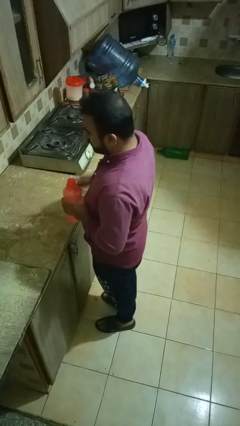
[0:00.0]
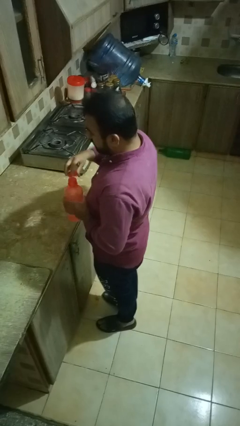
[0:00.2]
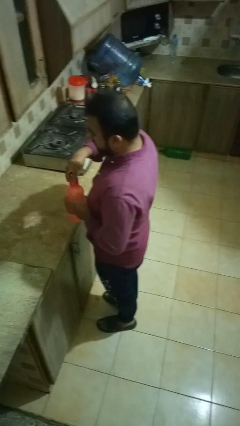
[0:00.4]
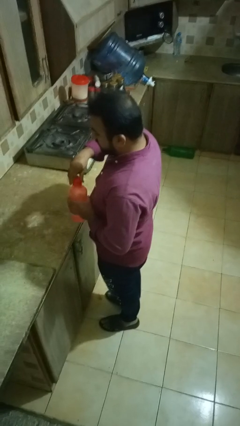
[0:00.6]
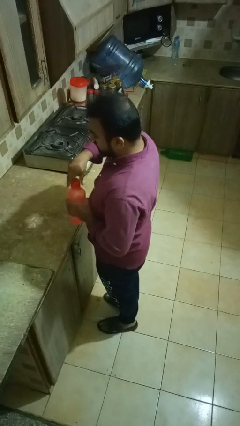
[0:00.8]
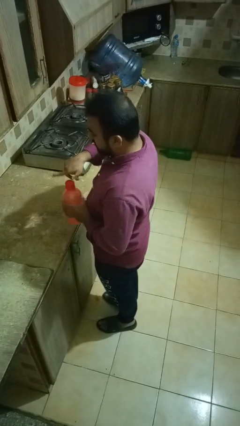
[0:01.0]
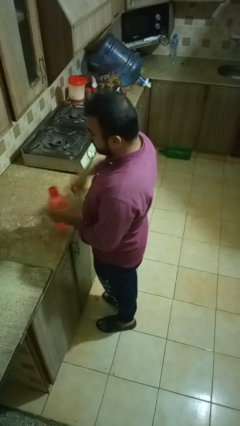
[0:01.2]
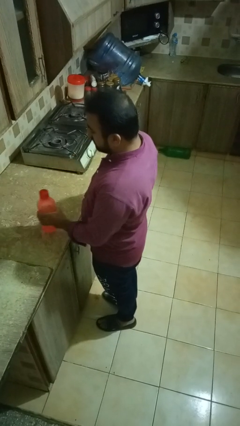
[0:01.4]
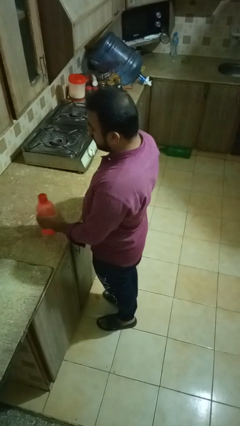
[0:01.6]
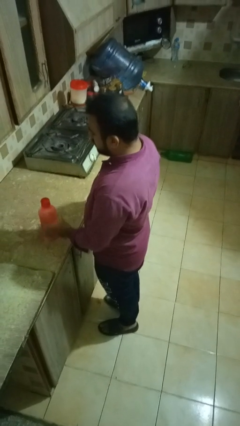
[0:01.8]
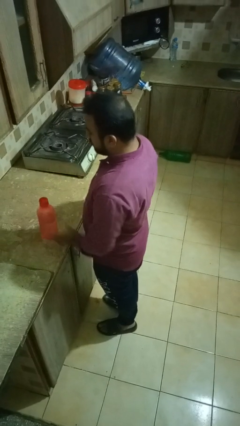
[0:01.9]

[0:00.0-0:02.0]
person screws lid to bottle

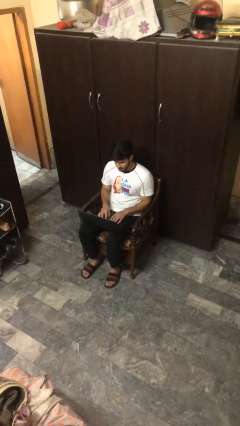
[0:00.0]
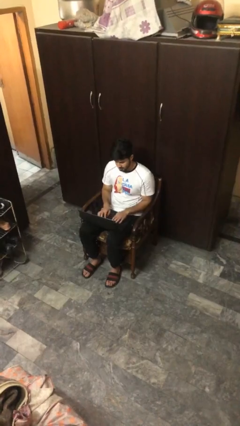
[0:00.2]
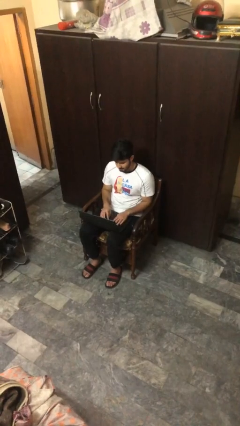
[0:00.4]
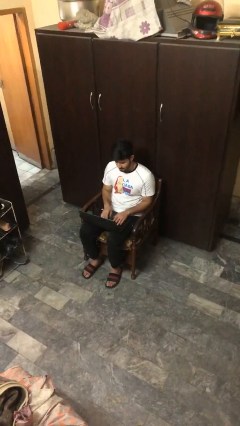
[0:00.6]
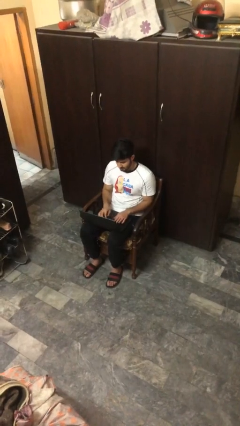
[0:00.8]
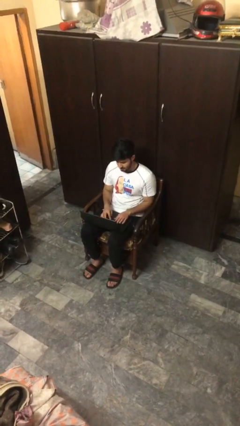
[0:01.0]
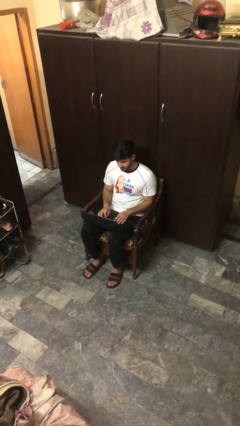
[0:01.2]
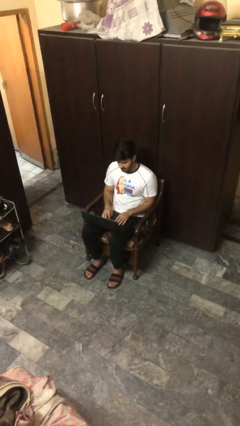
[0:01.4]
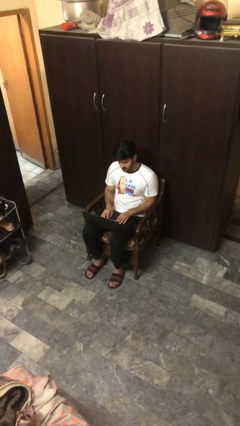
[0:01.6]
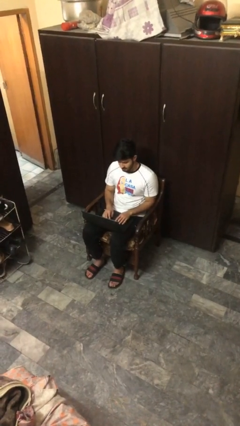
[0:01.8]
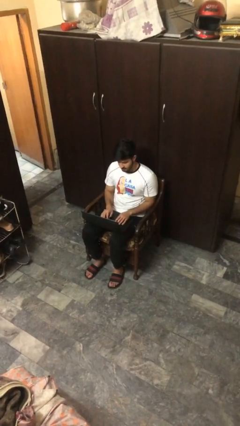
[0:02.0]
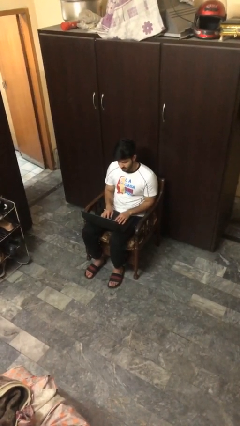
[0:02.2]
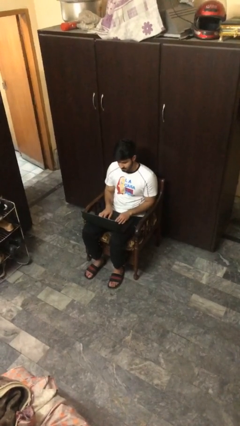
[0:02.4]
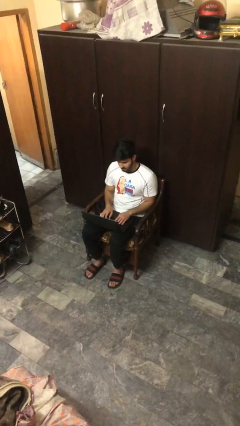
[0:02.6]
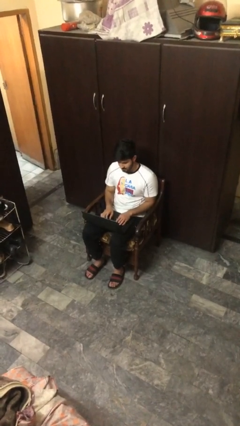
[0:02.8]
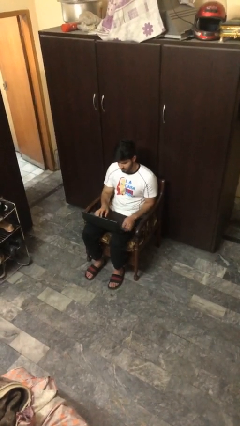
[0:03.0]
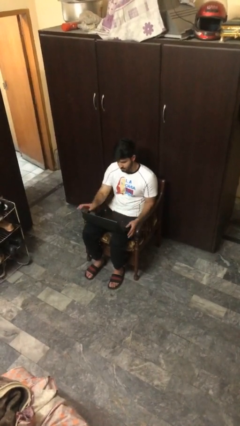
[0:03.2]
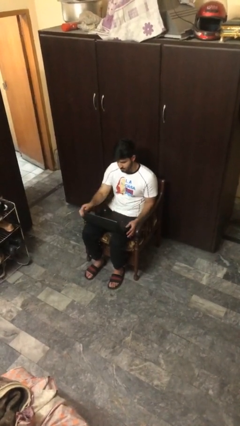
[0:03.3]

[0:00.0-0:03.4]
person interacts with laptop

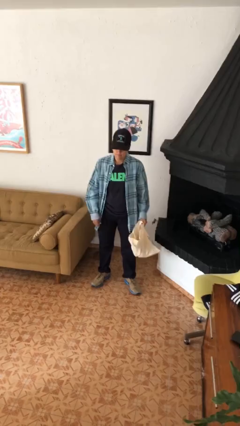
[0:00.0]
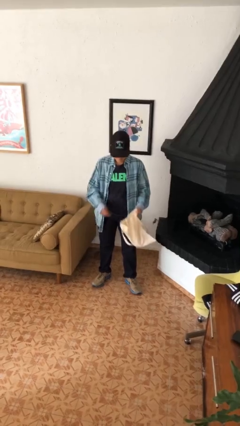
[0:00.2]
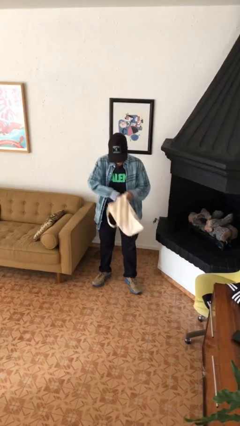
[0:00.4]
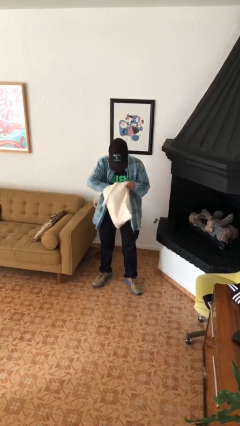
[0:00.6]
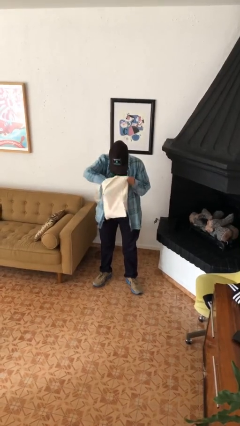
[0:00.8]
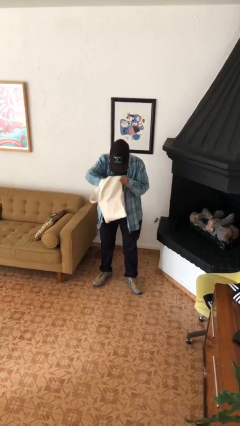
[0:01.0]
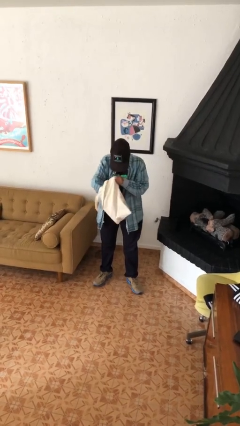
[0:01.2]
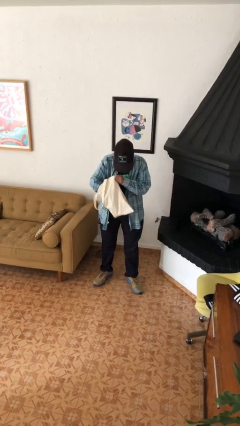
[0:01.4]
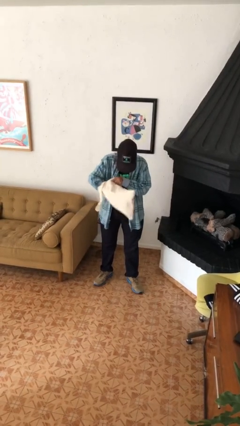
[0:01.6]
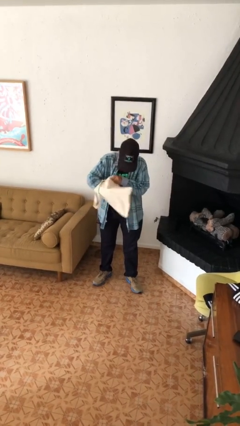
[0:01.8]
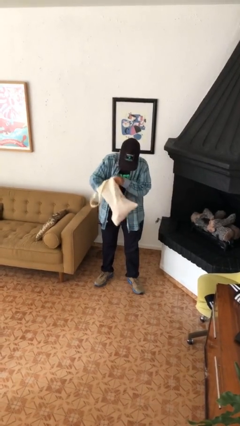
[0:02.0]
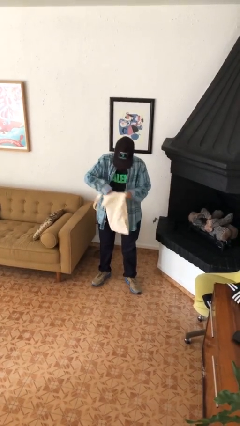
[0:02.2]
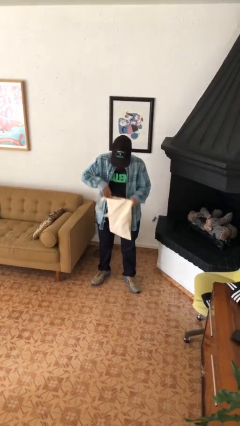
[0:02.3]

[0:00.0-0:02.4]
person searches in bag

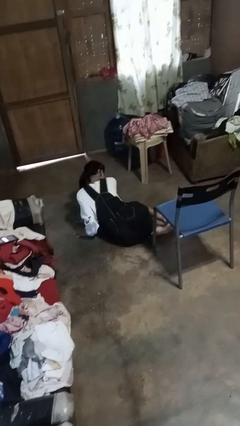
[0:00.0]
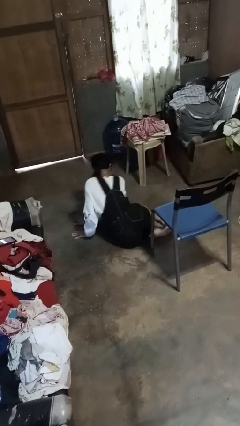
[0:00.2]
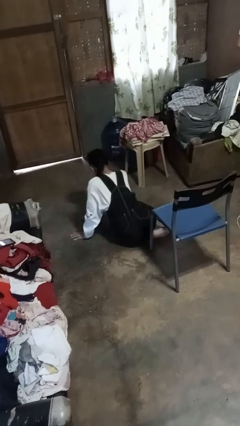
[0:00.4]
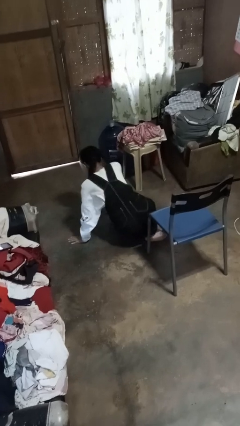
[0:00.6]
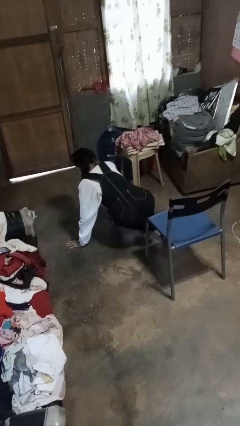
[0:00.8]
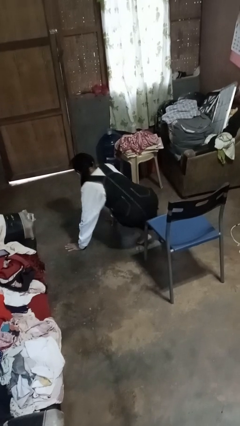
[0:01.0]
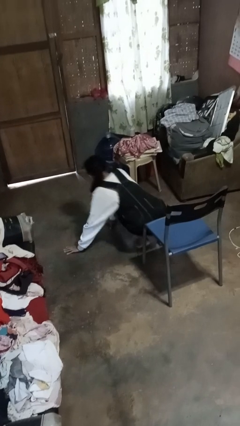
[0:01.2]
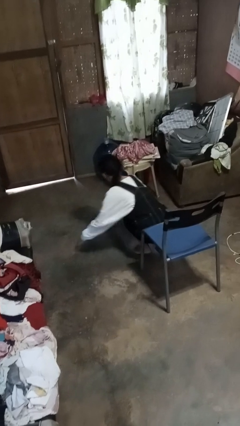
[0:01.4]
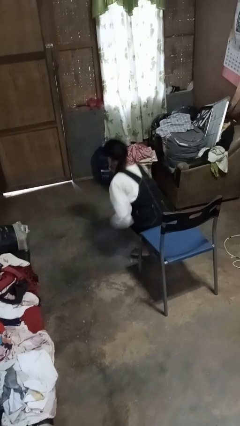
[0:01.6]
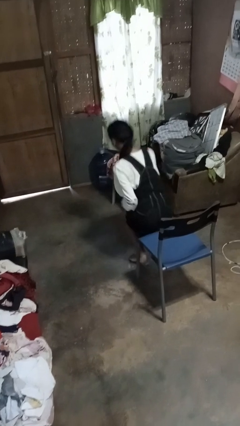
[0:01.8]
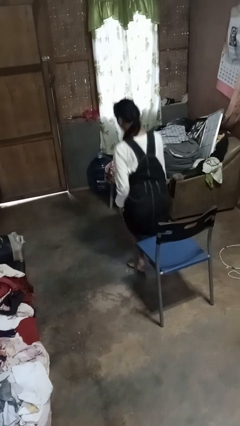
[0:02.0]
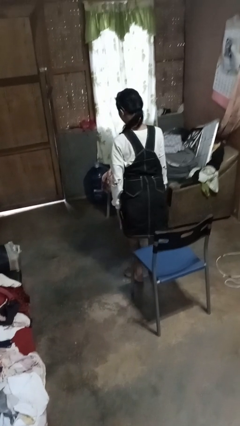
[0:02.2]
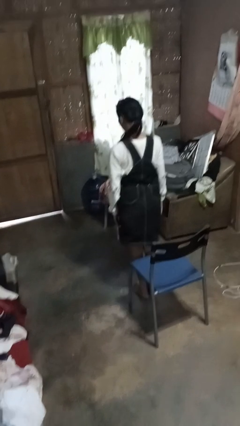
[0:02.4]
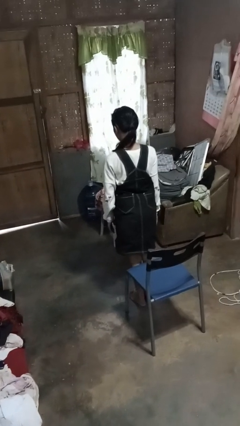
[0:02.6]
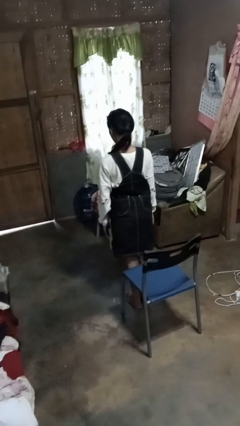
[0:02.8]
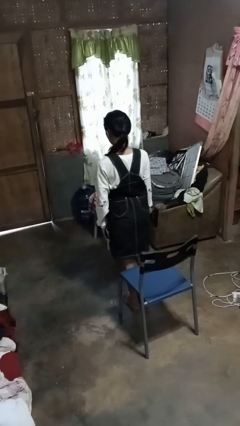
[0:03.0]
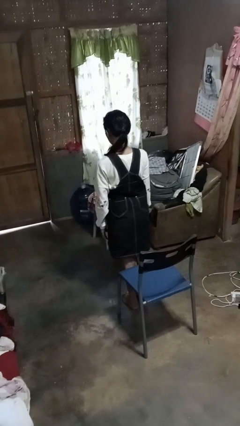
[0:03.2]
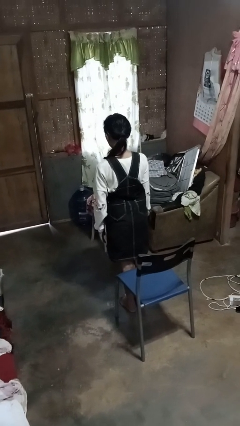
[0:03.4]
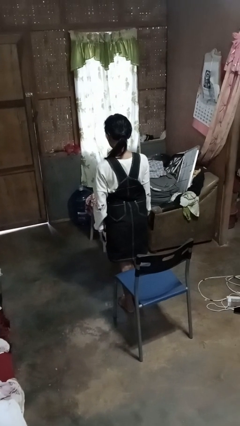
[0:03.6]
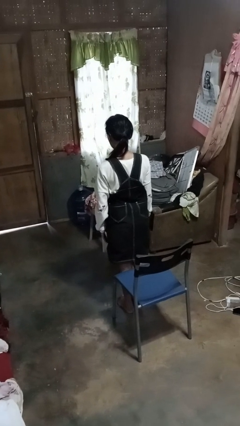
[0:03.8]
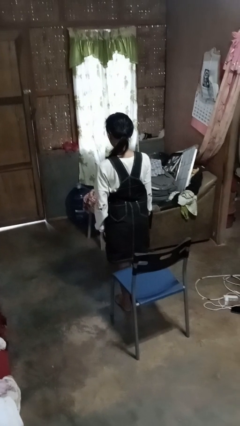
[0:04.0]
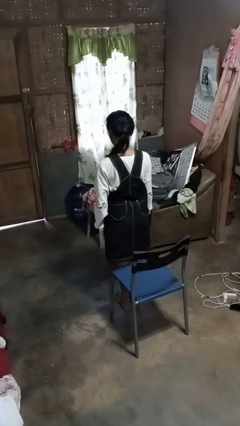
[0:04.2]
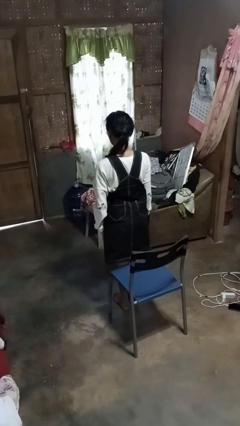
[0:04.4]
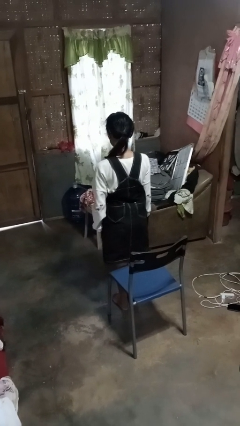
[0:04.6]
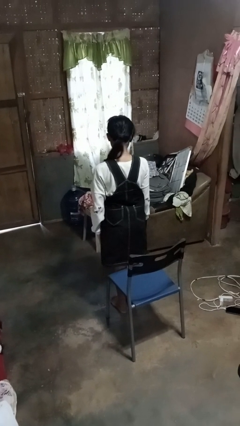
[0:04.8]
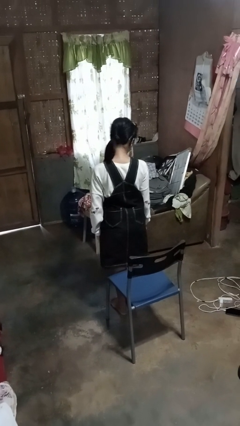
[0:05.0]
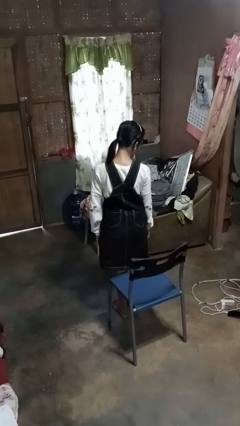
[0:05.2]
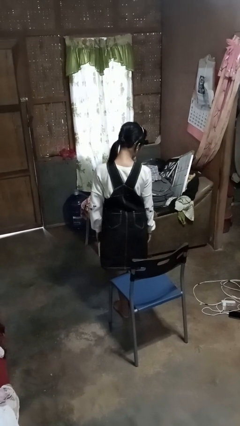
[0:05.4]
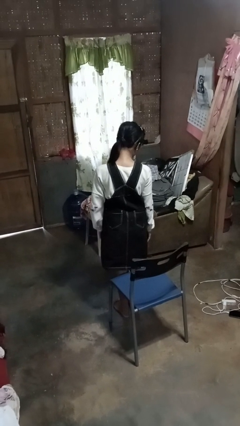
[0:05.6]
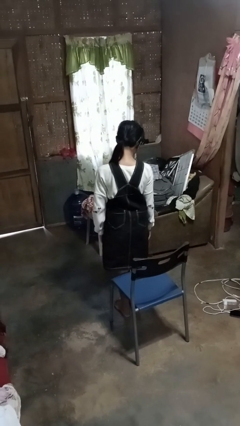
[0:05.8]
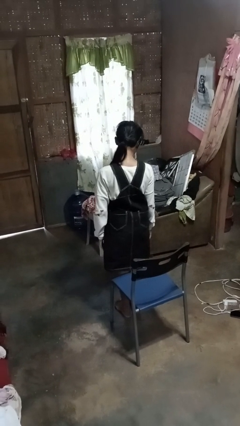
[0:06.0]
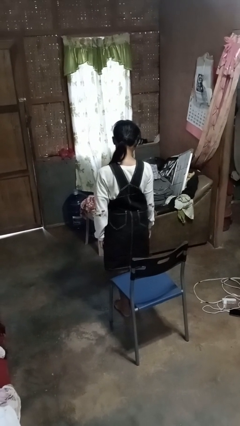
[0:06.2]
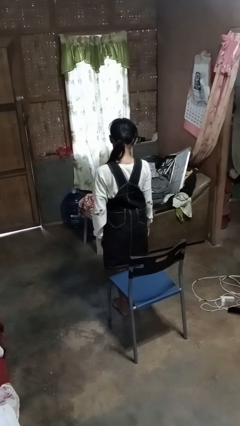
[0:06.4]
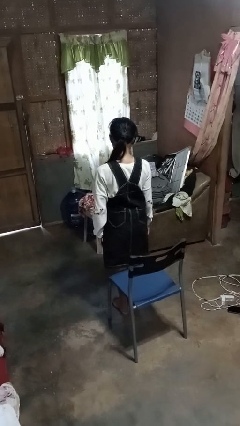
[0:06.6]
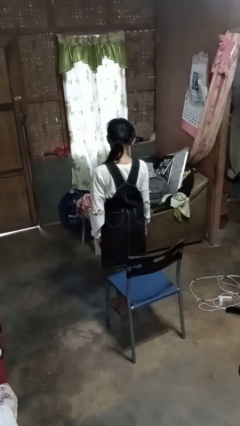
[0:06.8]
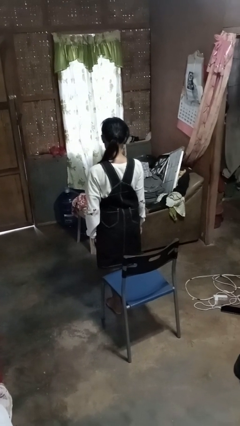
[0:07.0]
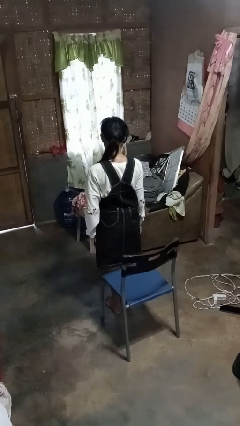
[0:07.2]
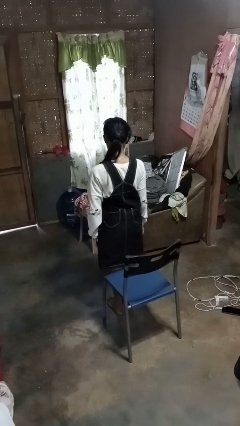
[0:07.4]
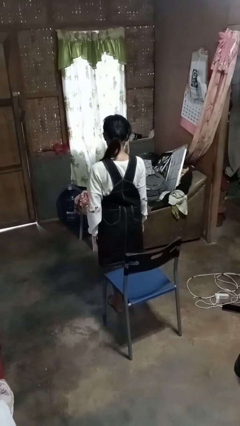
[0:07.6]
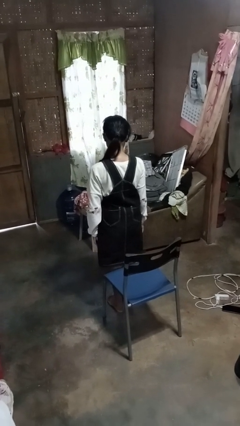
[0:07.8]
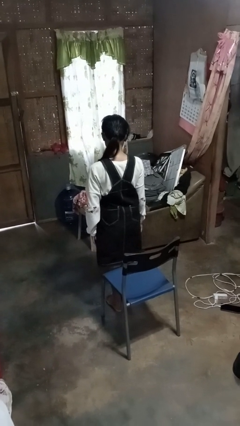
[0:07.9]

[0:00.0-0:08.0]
person stands up from floor

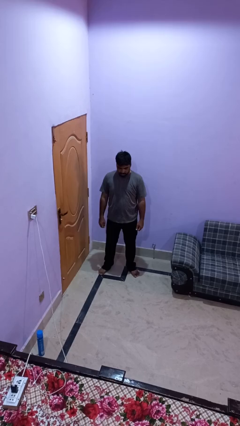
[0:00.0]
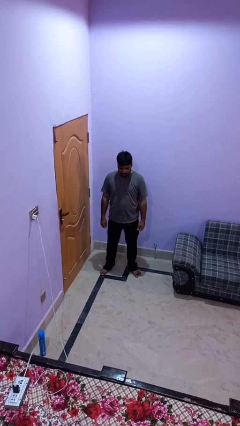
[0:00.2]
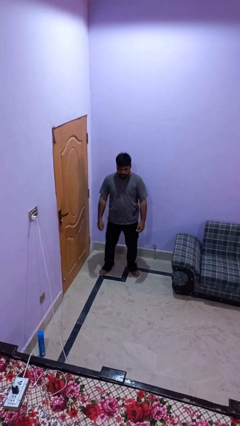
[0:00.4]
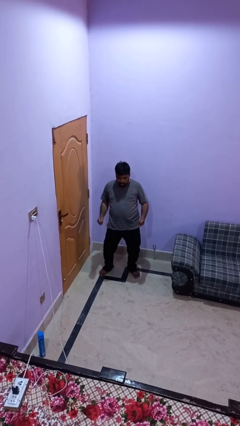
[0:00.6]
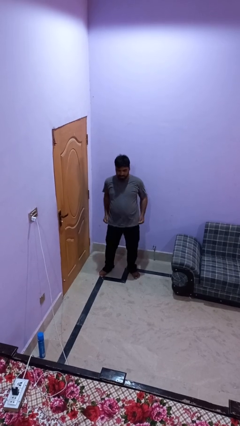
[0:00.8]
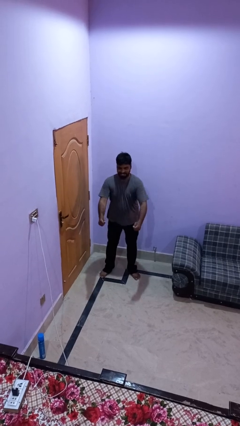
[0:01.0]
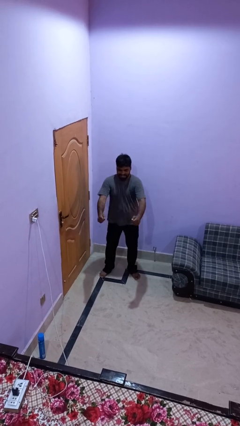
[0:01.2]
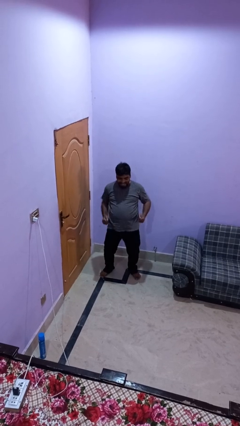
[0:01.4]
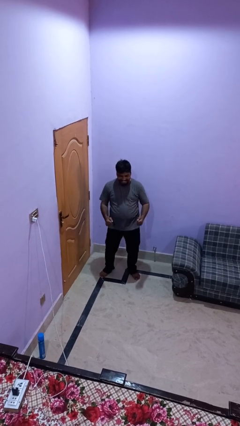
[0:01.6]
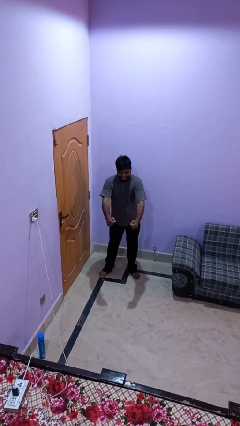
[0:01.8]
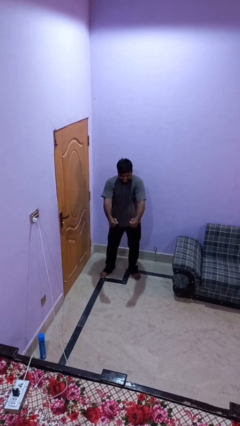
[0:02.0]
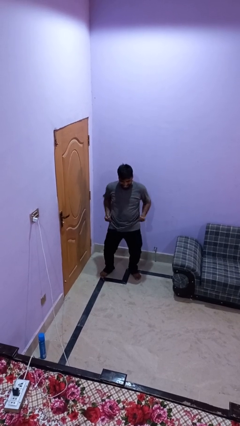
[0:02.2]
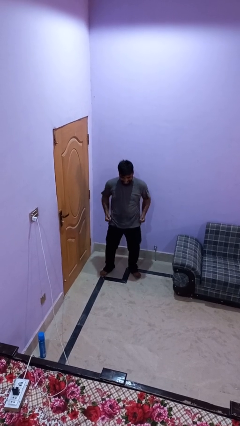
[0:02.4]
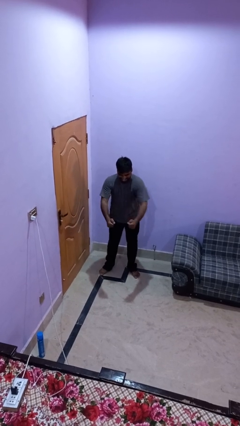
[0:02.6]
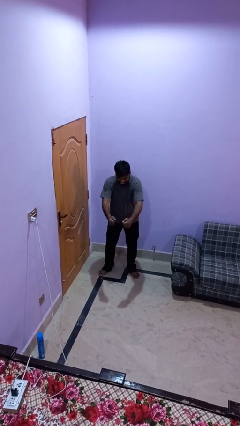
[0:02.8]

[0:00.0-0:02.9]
person wiggles hips
